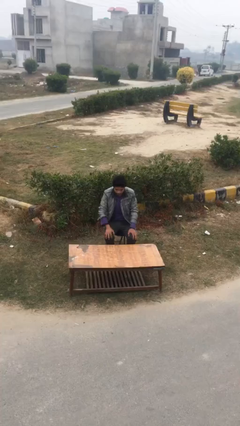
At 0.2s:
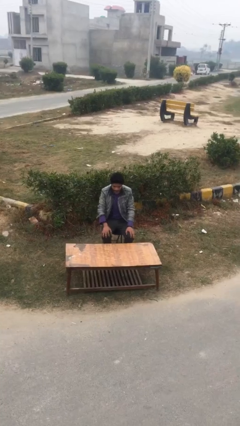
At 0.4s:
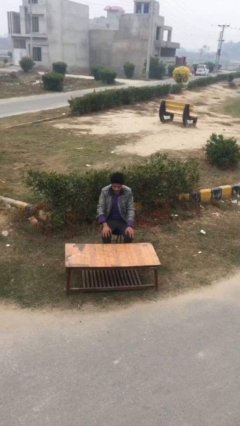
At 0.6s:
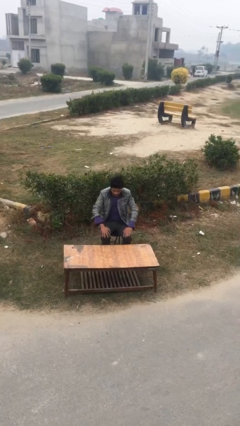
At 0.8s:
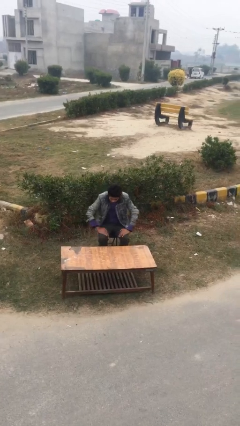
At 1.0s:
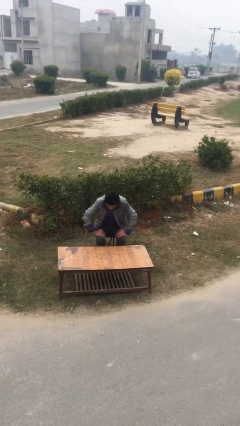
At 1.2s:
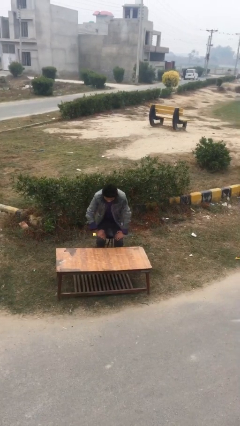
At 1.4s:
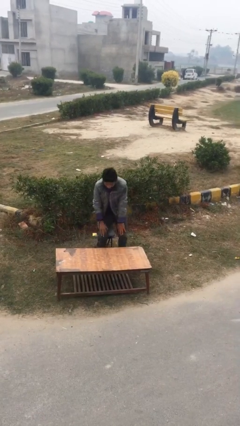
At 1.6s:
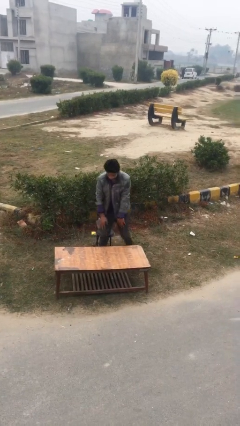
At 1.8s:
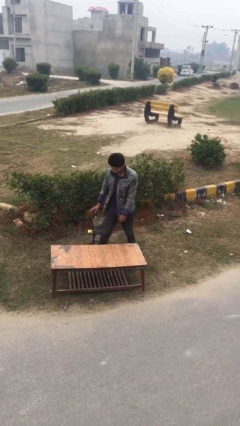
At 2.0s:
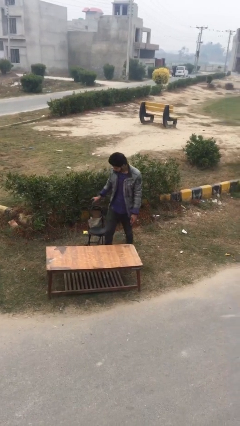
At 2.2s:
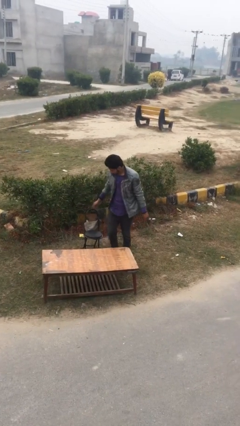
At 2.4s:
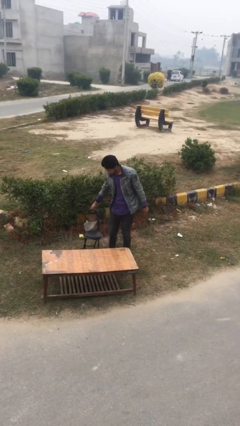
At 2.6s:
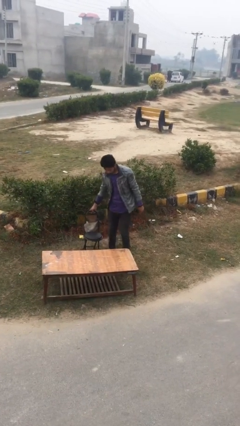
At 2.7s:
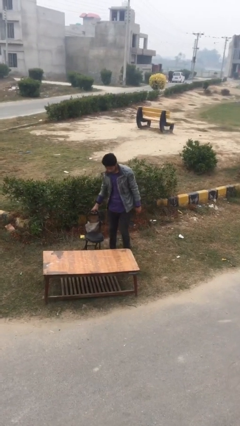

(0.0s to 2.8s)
person stands up

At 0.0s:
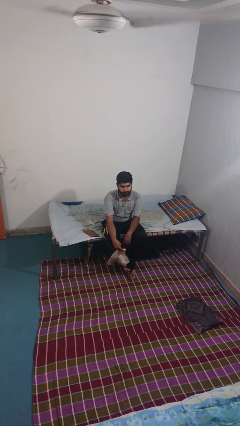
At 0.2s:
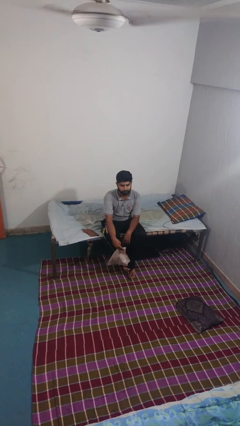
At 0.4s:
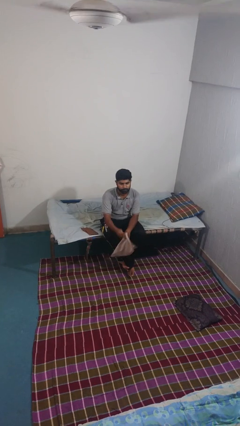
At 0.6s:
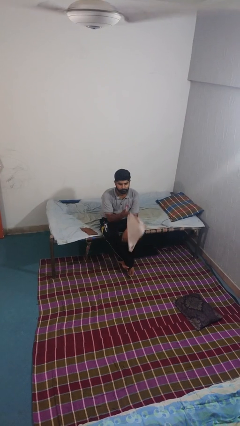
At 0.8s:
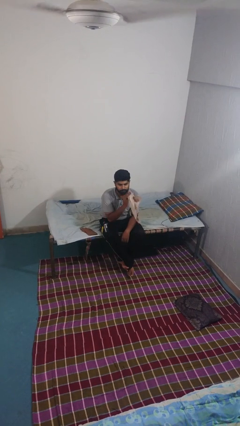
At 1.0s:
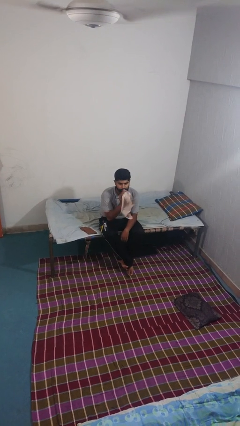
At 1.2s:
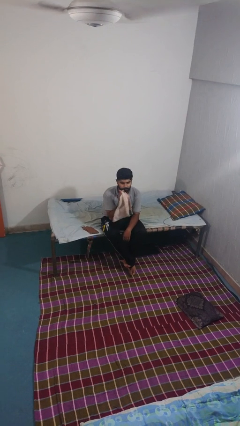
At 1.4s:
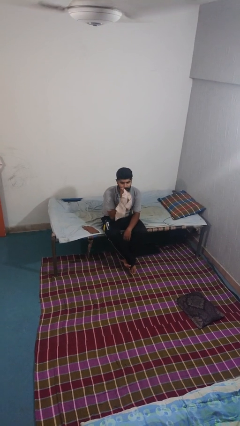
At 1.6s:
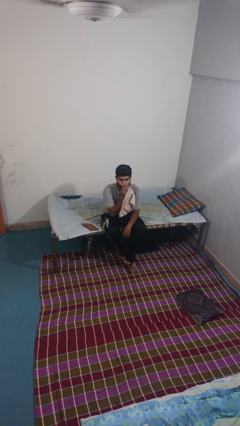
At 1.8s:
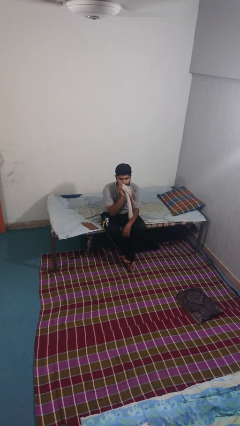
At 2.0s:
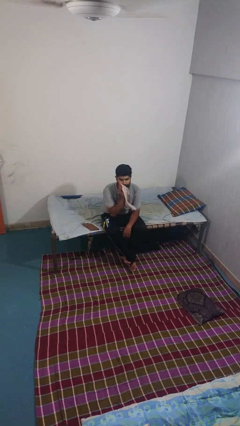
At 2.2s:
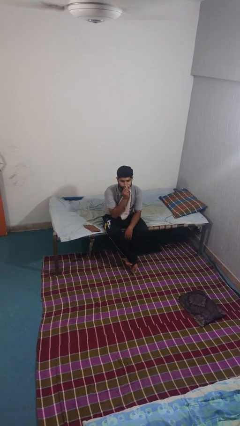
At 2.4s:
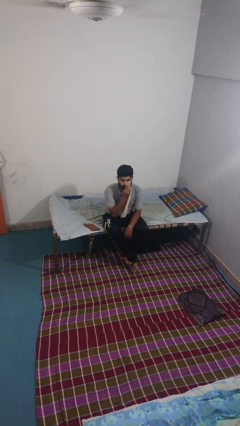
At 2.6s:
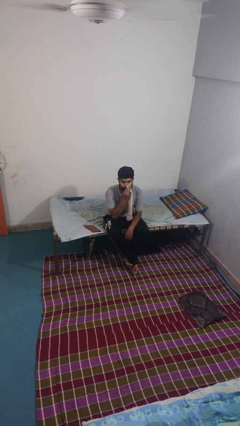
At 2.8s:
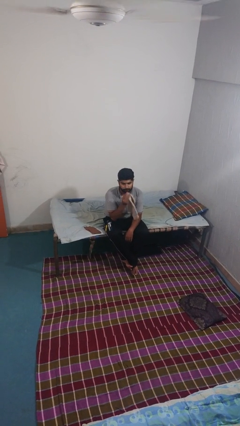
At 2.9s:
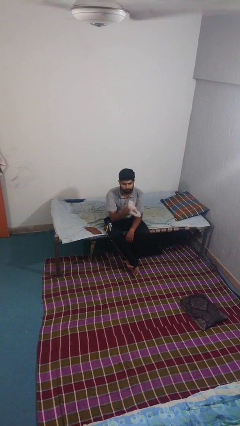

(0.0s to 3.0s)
person wipes mouth with napkin

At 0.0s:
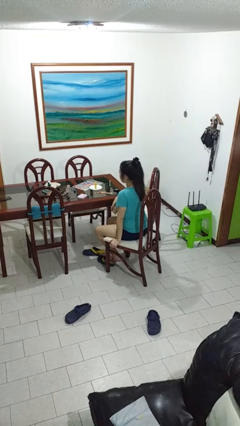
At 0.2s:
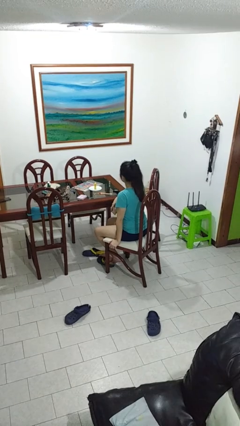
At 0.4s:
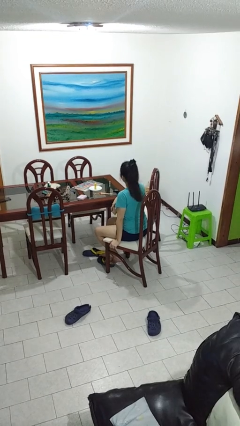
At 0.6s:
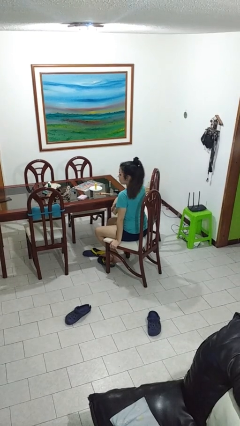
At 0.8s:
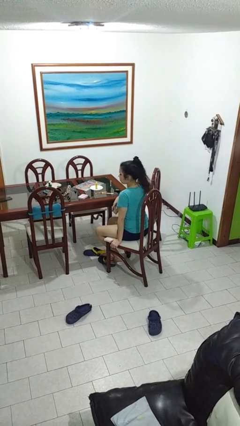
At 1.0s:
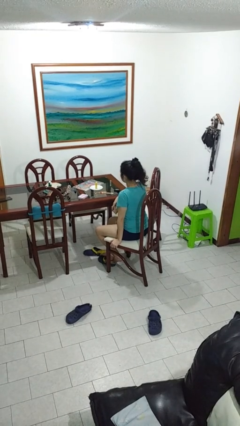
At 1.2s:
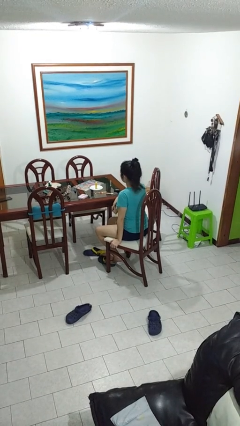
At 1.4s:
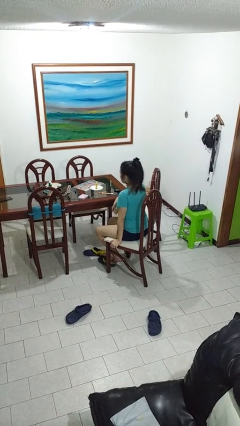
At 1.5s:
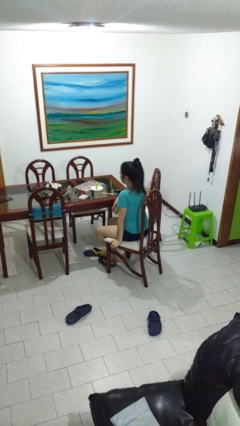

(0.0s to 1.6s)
person shakes head

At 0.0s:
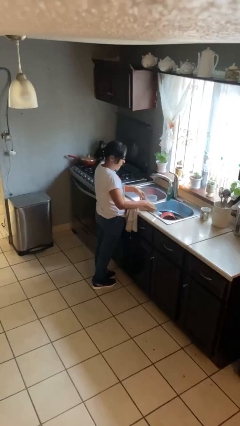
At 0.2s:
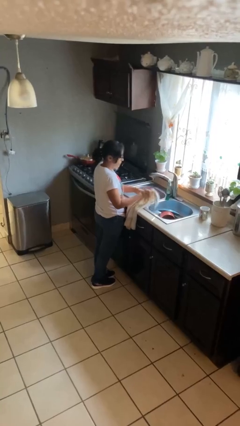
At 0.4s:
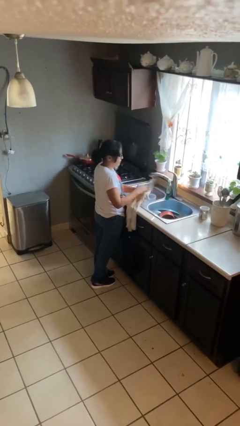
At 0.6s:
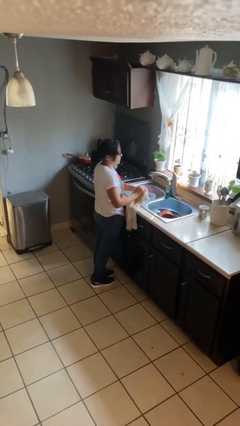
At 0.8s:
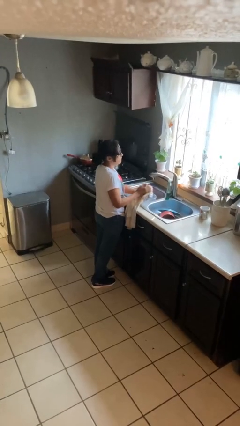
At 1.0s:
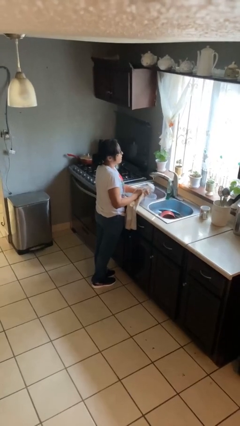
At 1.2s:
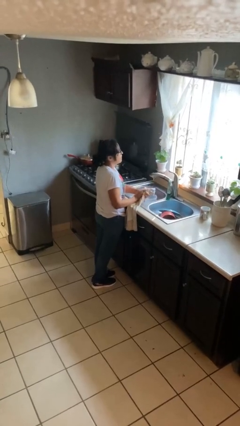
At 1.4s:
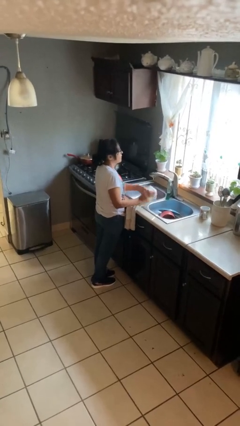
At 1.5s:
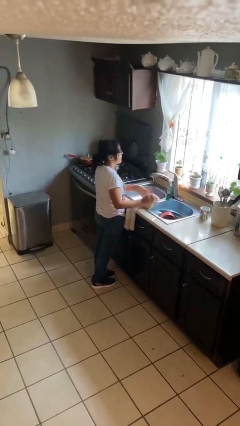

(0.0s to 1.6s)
person dries hands with towel

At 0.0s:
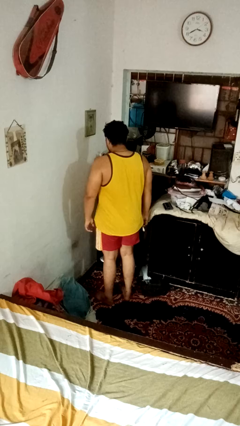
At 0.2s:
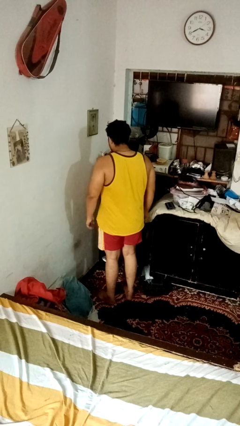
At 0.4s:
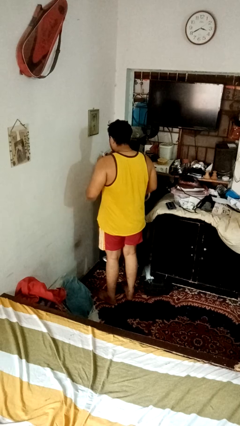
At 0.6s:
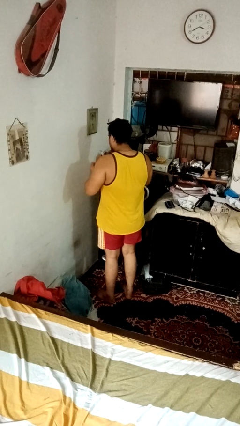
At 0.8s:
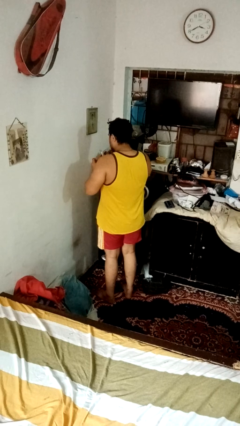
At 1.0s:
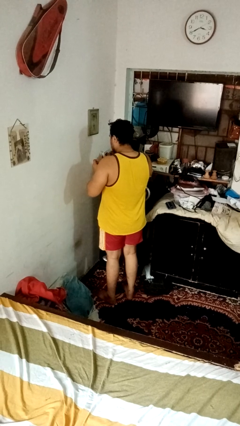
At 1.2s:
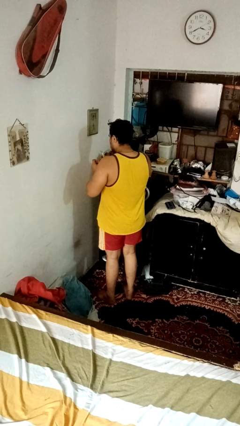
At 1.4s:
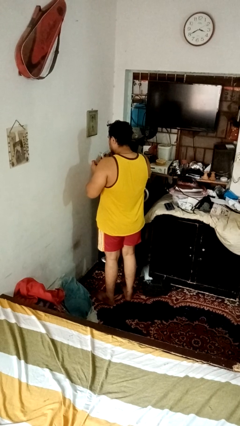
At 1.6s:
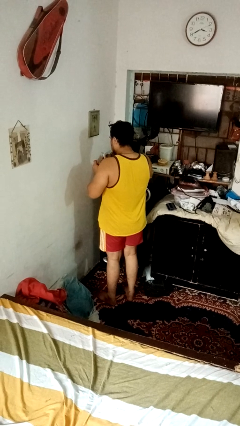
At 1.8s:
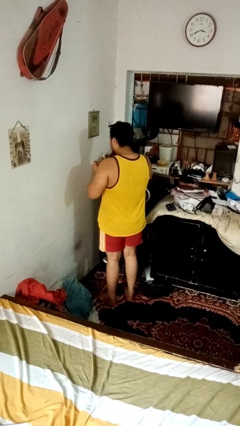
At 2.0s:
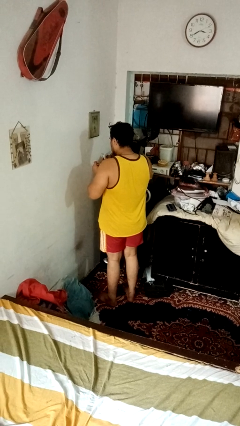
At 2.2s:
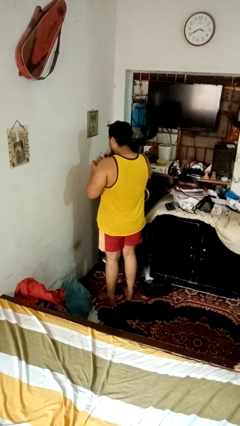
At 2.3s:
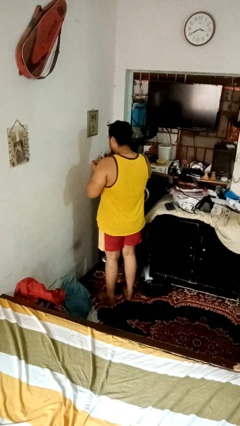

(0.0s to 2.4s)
person clips fingernails

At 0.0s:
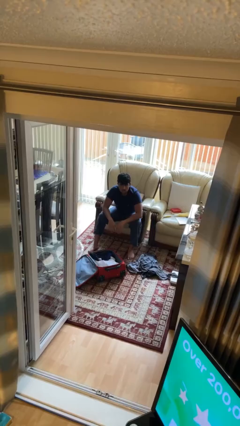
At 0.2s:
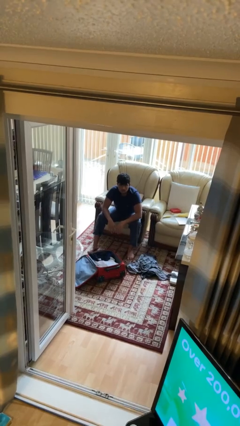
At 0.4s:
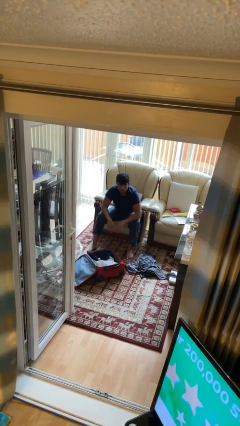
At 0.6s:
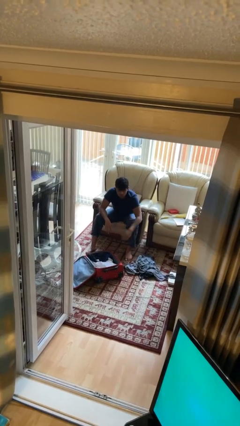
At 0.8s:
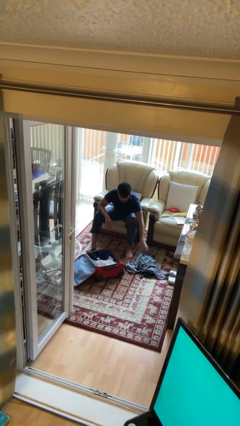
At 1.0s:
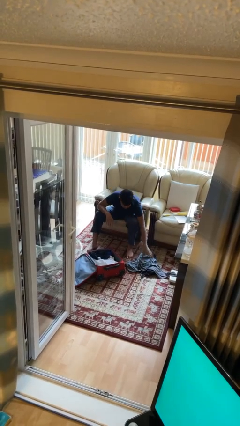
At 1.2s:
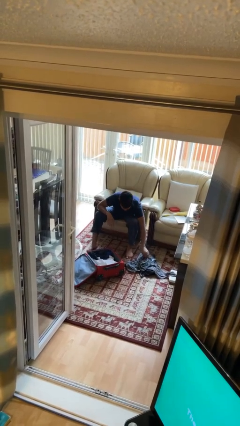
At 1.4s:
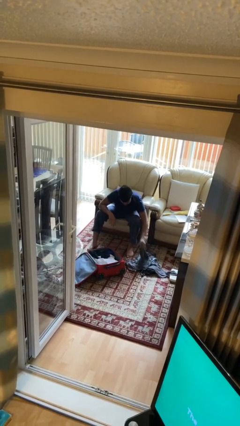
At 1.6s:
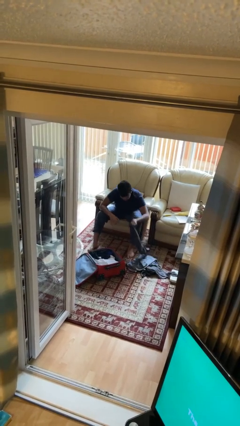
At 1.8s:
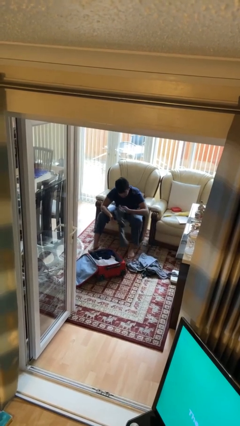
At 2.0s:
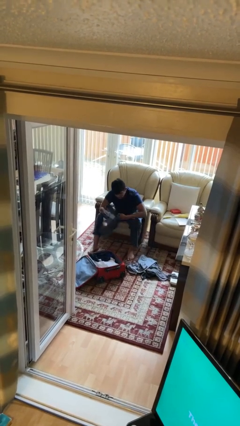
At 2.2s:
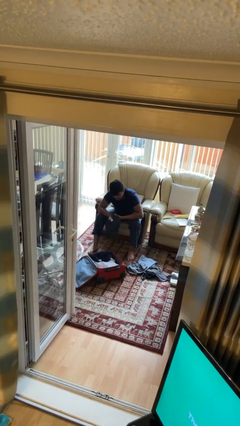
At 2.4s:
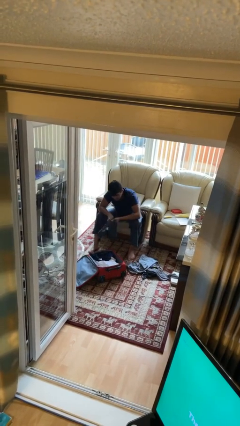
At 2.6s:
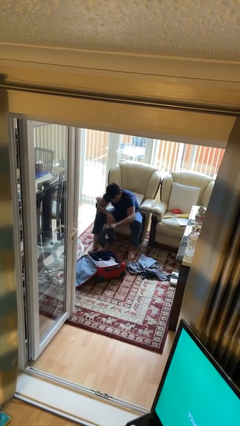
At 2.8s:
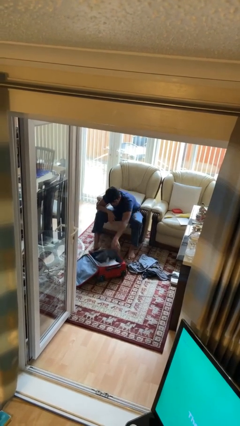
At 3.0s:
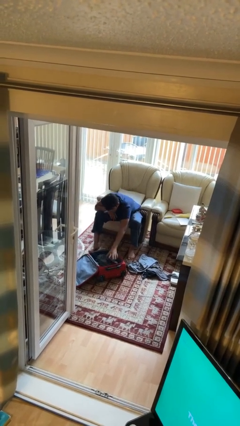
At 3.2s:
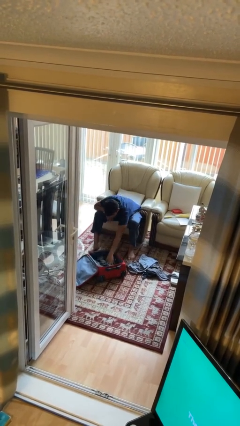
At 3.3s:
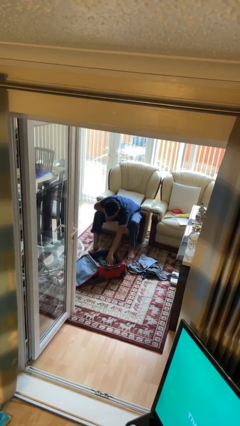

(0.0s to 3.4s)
person loads clothes into suitcase

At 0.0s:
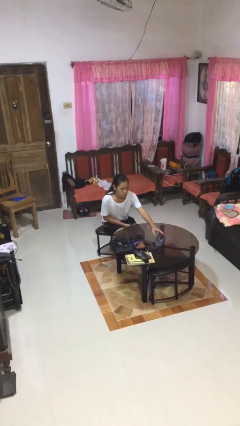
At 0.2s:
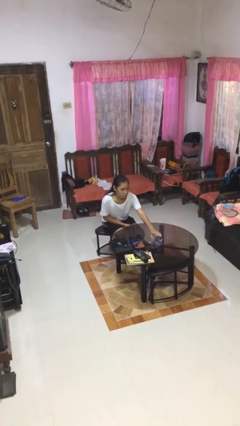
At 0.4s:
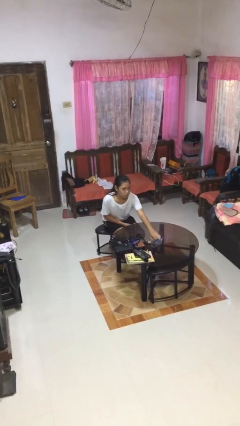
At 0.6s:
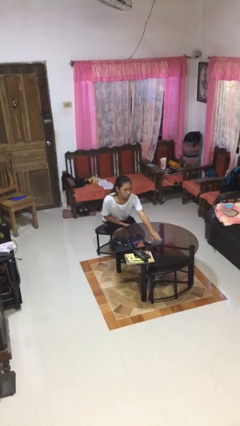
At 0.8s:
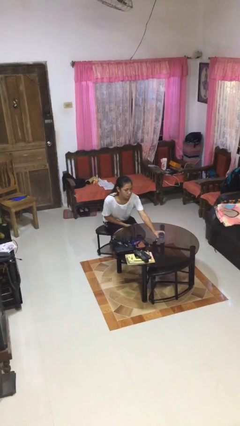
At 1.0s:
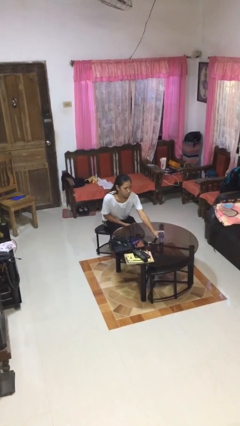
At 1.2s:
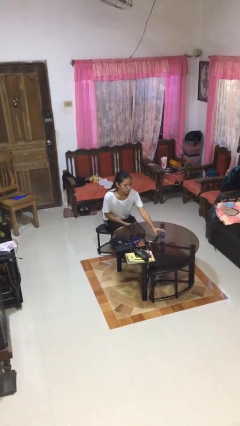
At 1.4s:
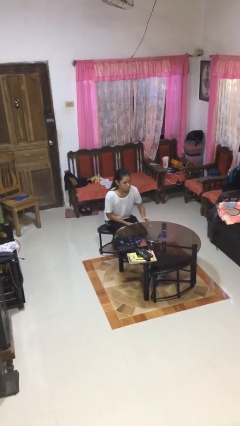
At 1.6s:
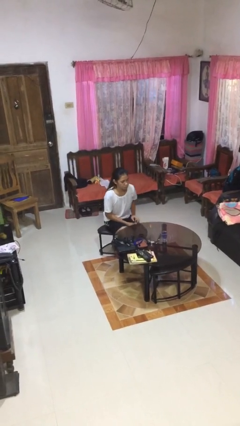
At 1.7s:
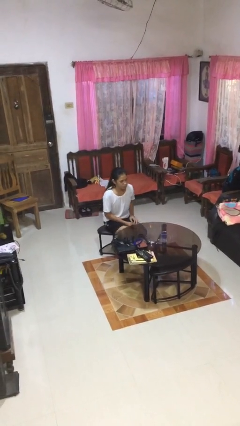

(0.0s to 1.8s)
person sets upright glass

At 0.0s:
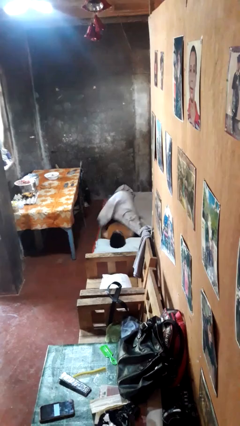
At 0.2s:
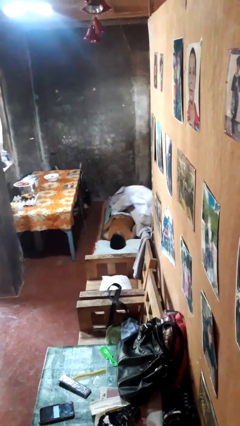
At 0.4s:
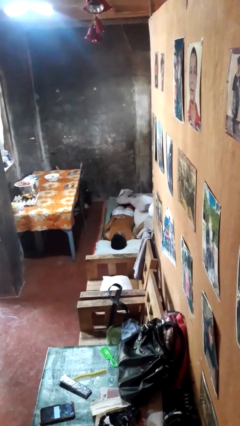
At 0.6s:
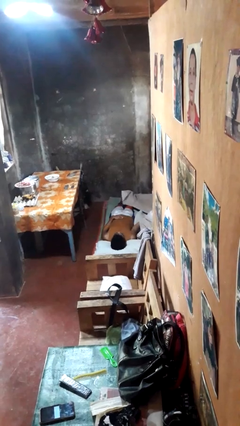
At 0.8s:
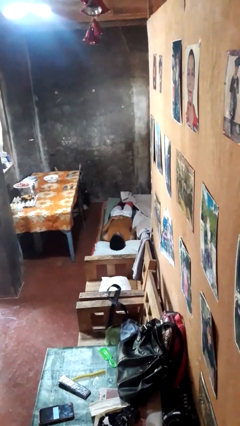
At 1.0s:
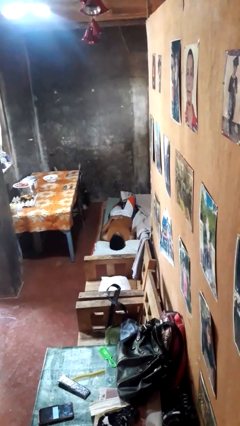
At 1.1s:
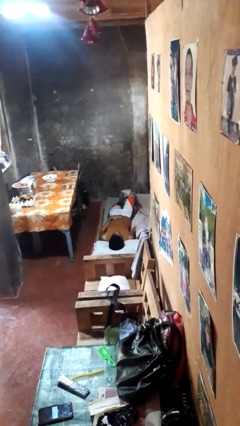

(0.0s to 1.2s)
person uncovers with bedsheets
